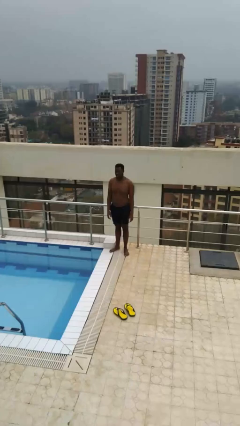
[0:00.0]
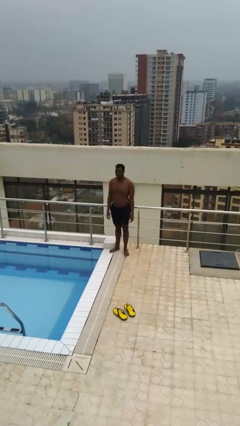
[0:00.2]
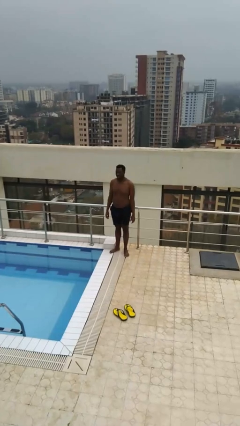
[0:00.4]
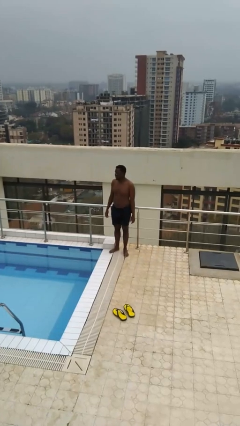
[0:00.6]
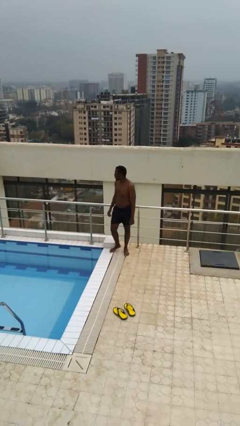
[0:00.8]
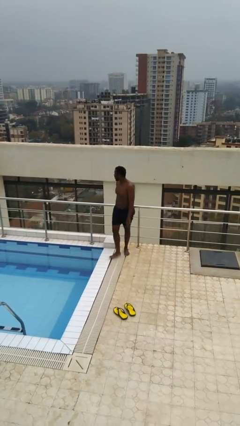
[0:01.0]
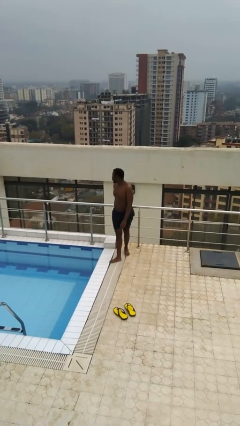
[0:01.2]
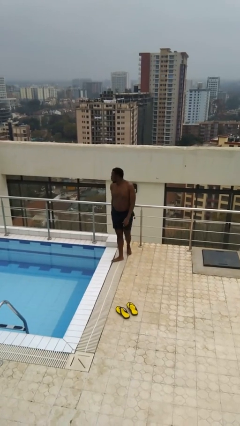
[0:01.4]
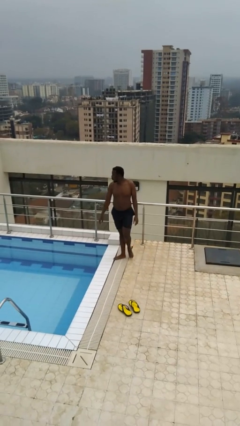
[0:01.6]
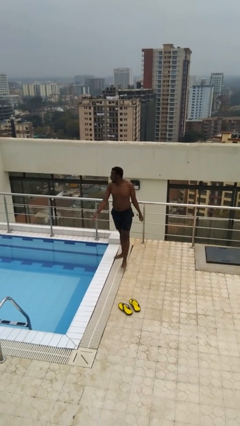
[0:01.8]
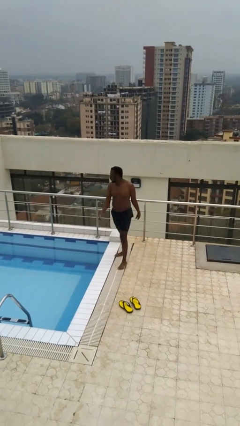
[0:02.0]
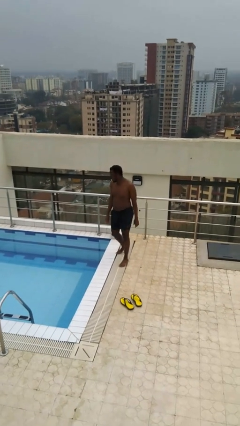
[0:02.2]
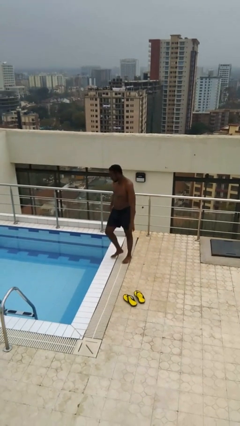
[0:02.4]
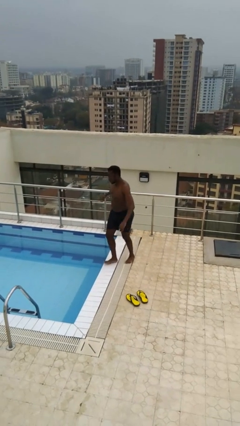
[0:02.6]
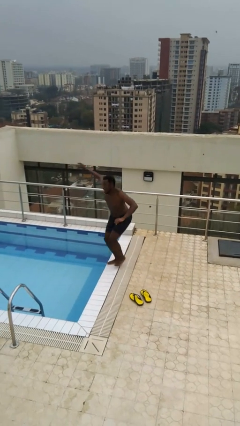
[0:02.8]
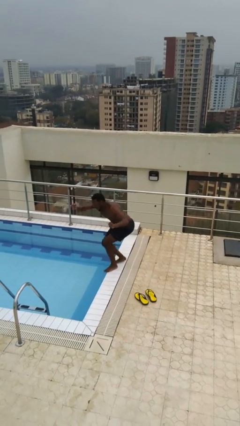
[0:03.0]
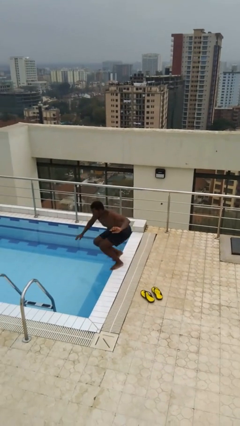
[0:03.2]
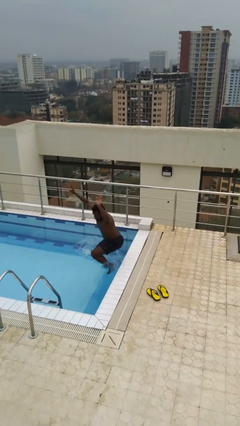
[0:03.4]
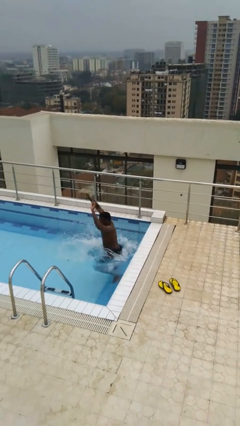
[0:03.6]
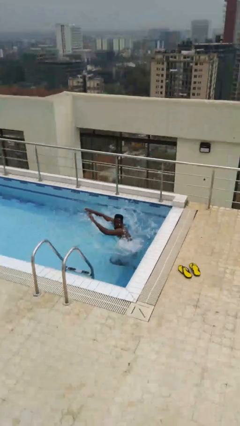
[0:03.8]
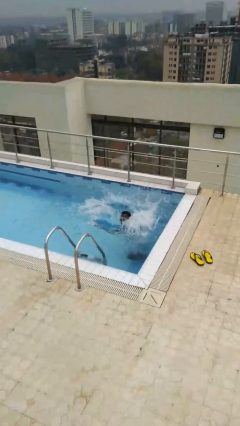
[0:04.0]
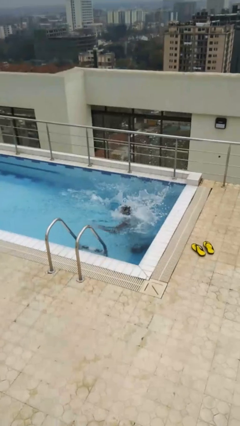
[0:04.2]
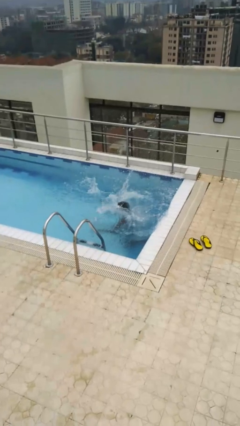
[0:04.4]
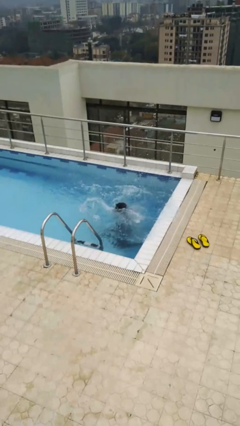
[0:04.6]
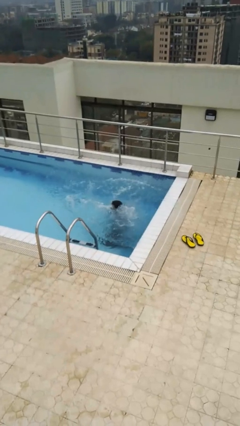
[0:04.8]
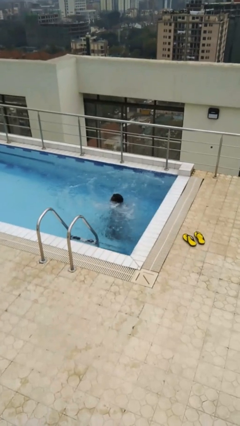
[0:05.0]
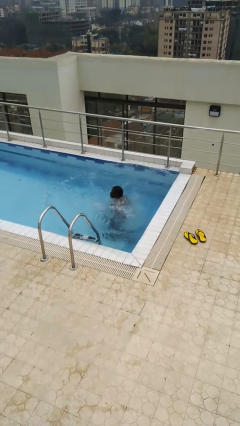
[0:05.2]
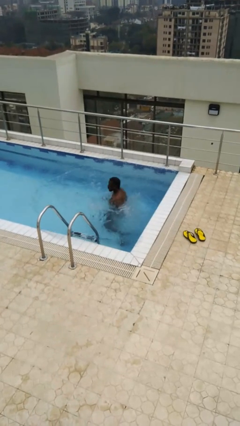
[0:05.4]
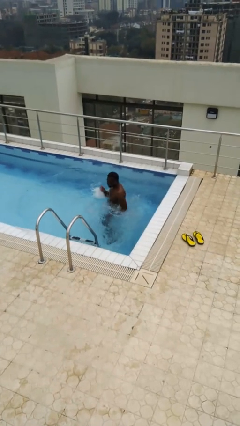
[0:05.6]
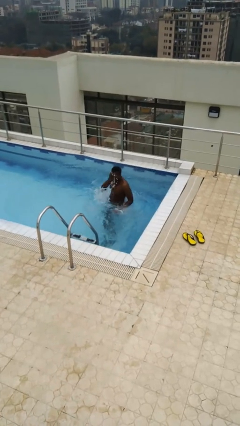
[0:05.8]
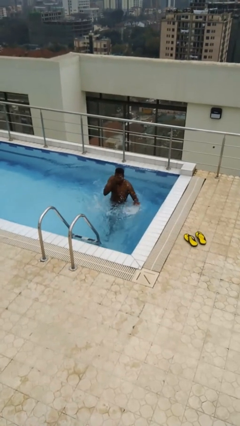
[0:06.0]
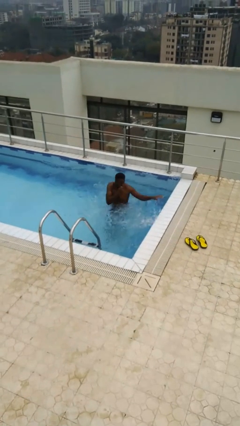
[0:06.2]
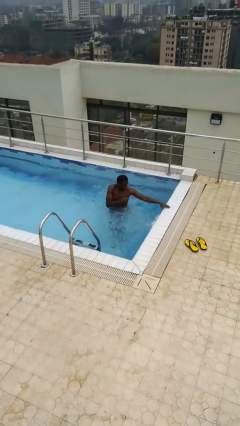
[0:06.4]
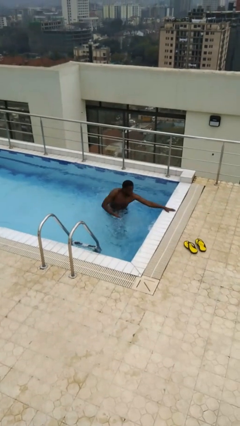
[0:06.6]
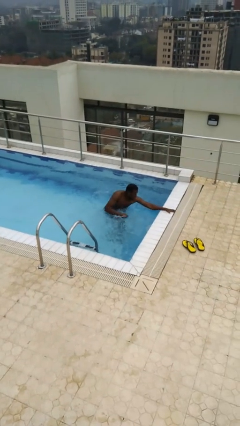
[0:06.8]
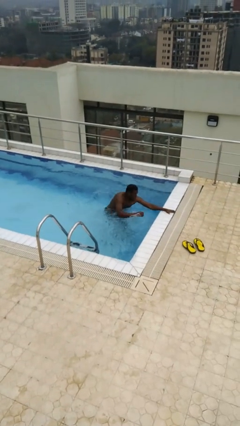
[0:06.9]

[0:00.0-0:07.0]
person falls into pool
